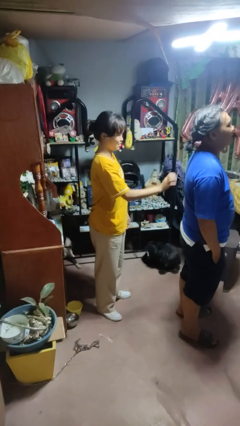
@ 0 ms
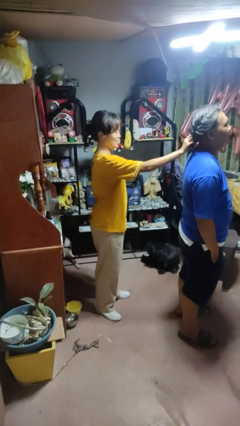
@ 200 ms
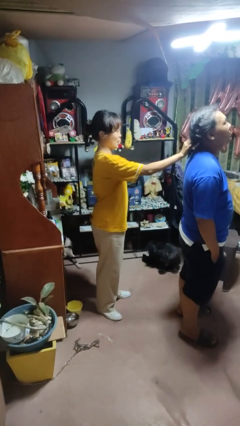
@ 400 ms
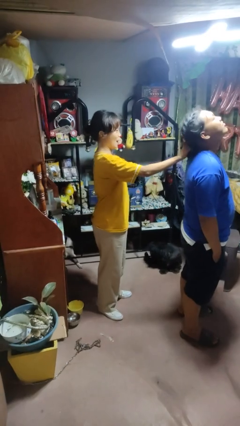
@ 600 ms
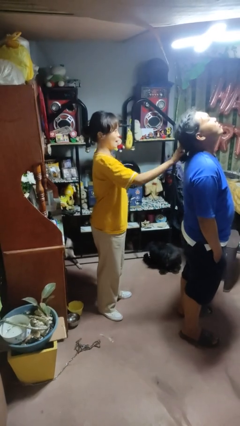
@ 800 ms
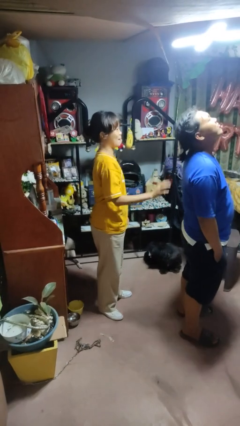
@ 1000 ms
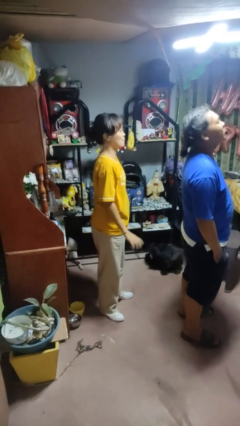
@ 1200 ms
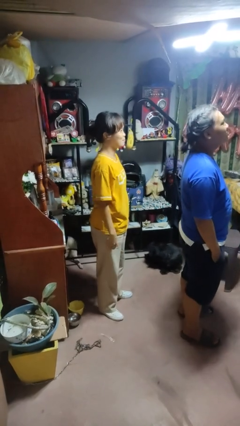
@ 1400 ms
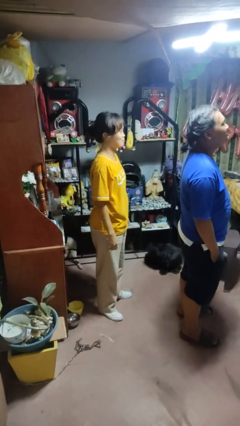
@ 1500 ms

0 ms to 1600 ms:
person grabs person by hair

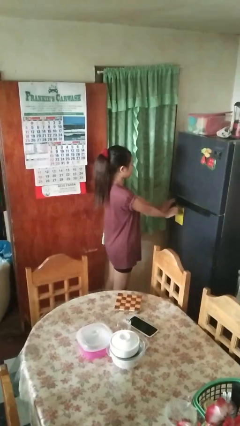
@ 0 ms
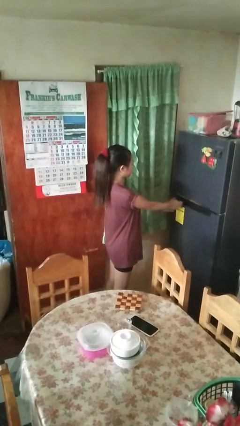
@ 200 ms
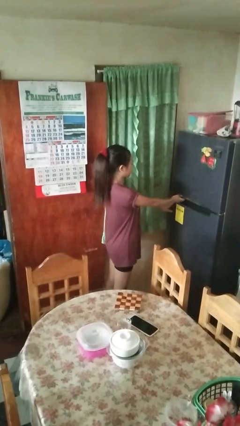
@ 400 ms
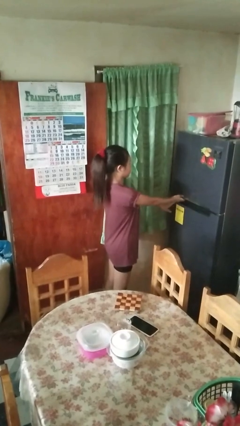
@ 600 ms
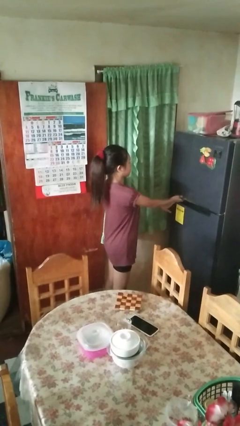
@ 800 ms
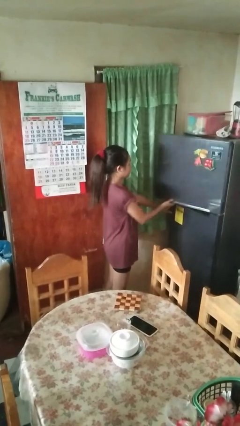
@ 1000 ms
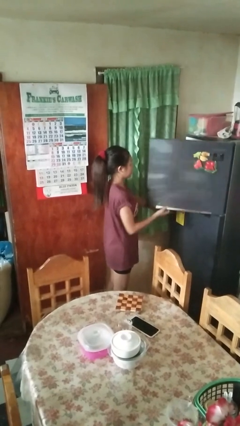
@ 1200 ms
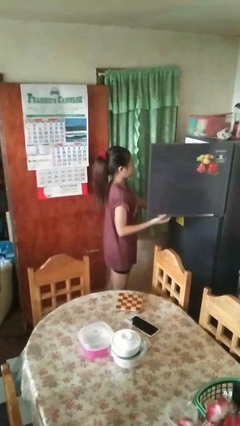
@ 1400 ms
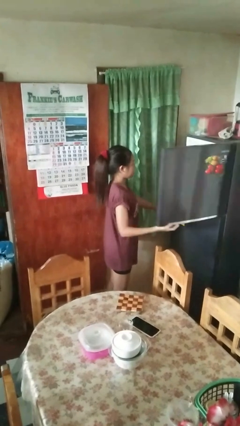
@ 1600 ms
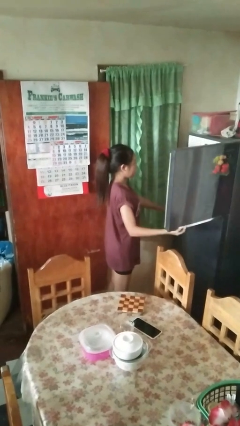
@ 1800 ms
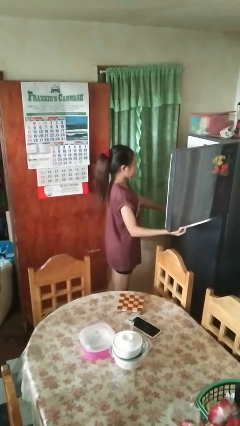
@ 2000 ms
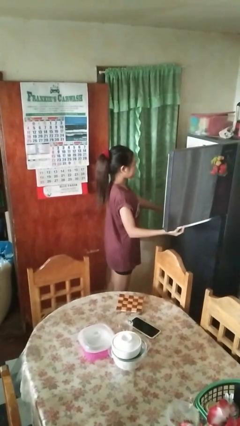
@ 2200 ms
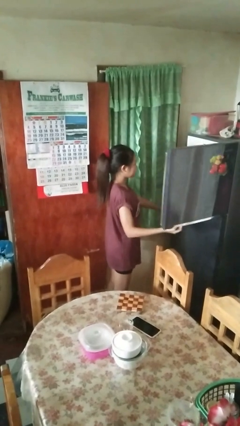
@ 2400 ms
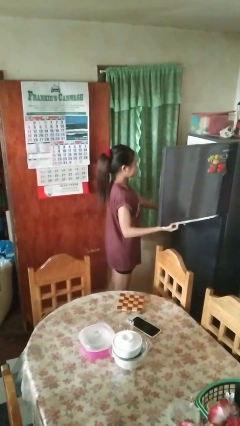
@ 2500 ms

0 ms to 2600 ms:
person opens refrigerator

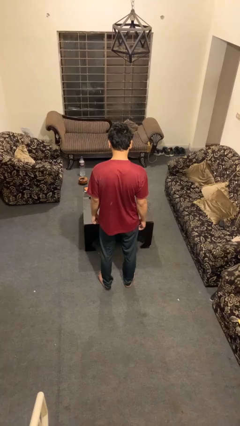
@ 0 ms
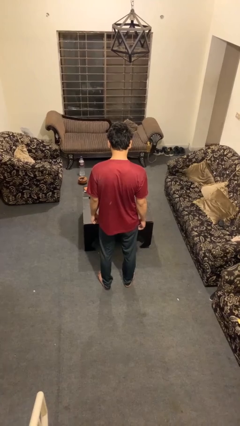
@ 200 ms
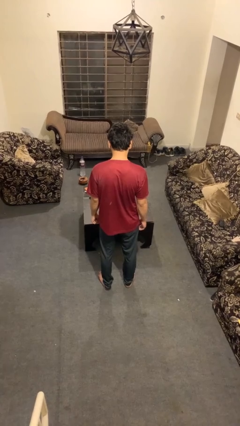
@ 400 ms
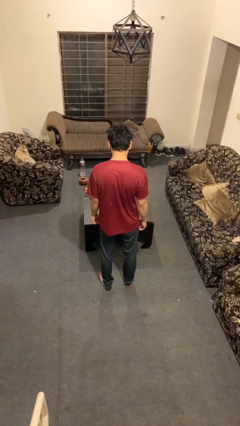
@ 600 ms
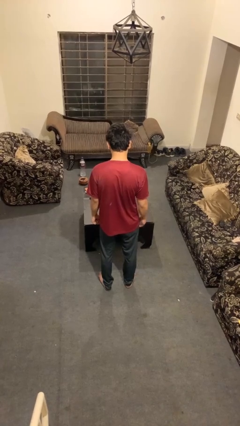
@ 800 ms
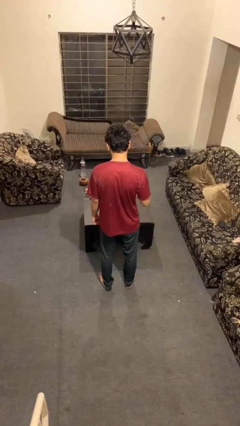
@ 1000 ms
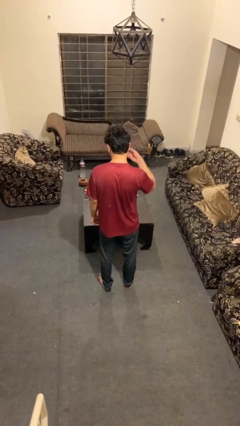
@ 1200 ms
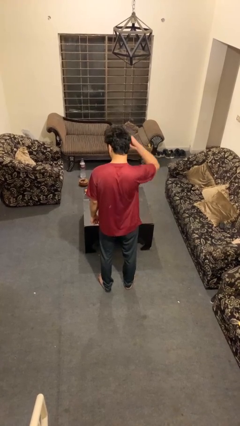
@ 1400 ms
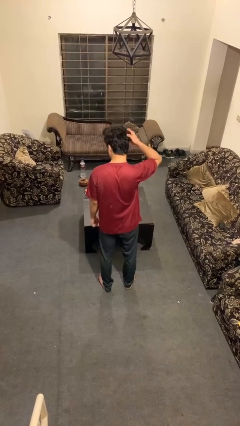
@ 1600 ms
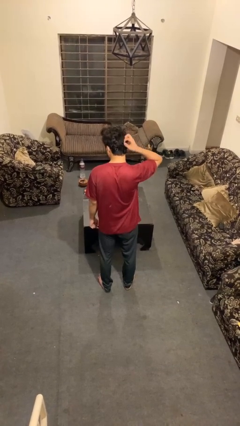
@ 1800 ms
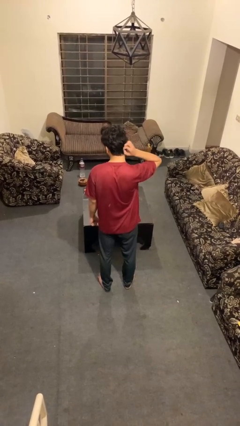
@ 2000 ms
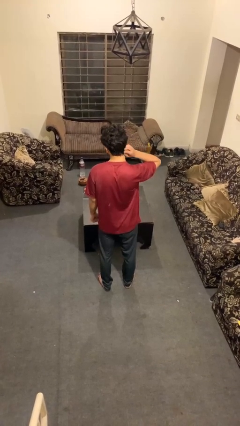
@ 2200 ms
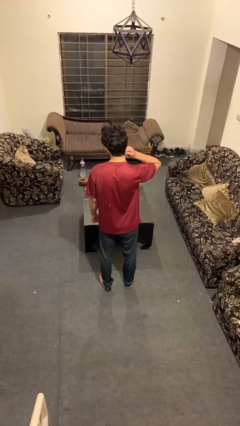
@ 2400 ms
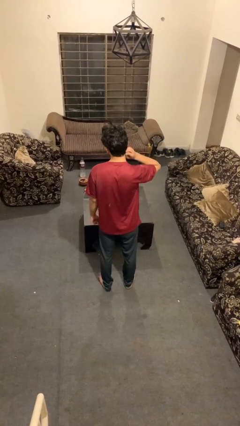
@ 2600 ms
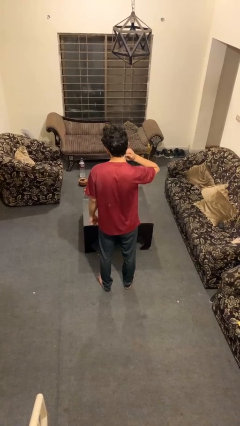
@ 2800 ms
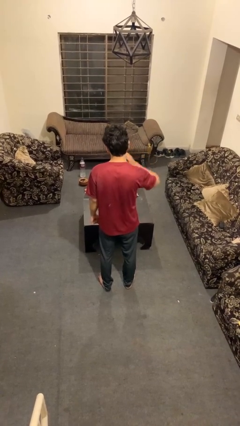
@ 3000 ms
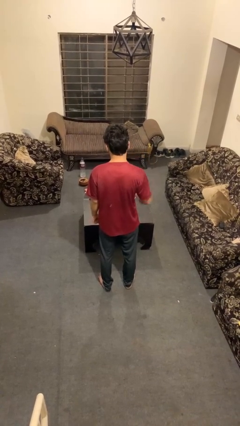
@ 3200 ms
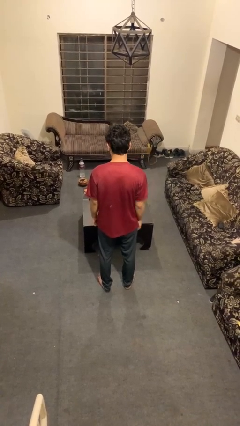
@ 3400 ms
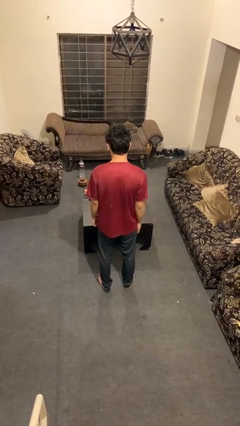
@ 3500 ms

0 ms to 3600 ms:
person strokes hair

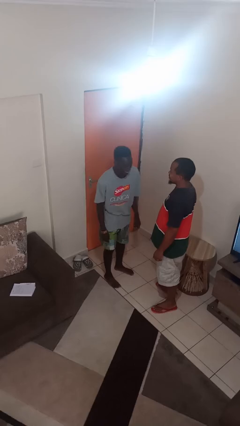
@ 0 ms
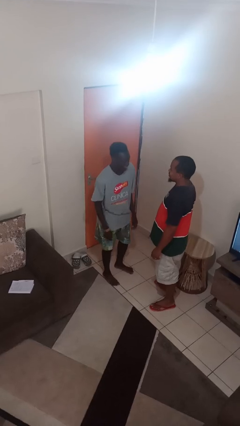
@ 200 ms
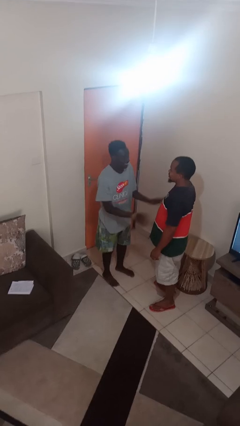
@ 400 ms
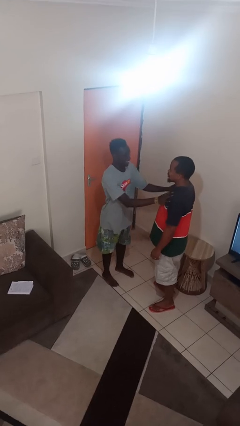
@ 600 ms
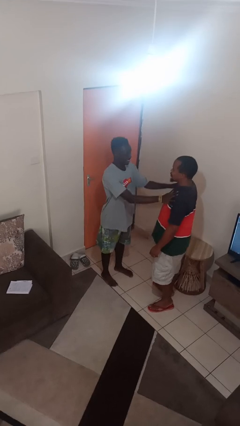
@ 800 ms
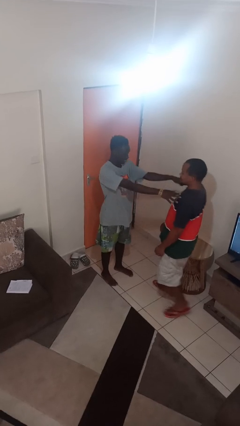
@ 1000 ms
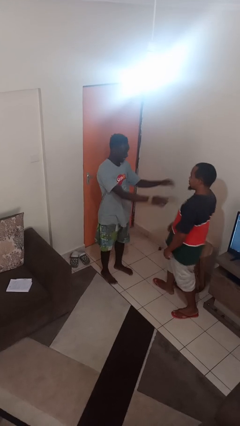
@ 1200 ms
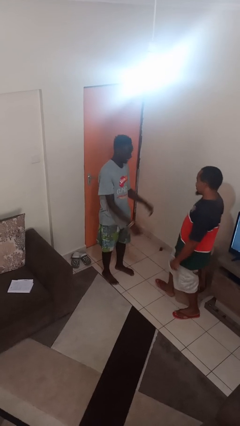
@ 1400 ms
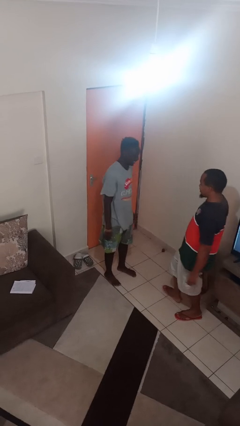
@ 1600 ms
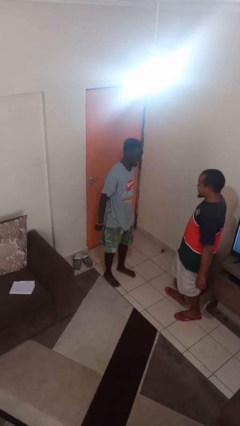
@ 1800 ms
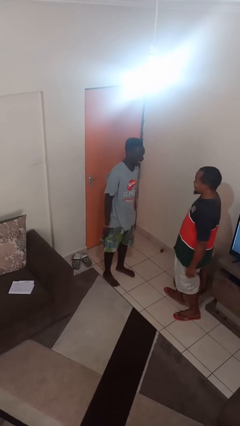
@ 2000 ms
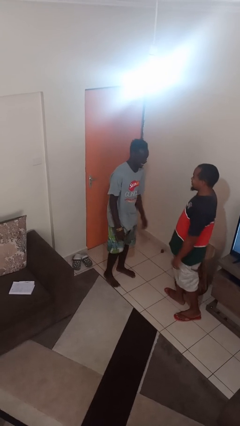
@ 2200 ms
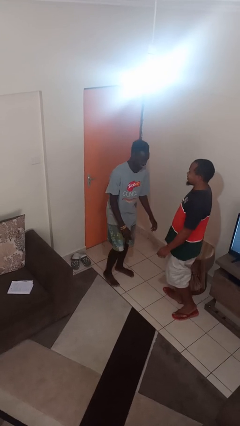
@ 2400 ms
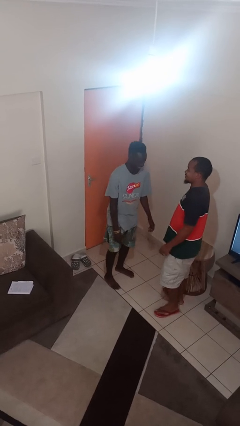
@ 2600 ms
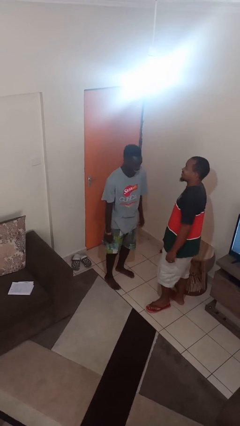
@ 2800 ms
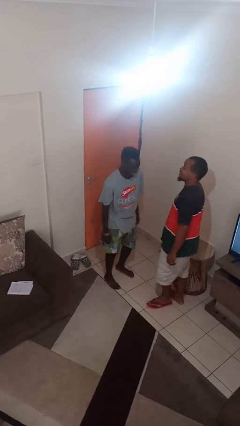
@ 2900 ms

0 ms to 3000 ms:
person shoves person

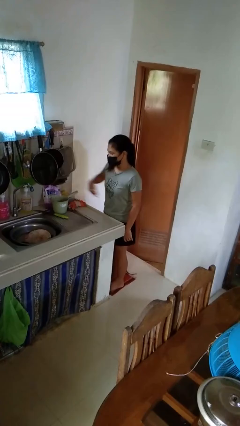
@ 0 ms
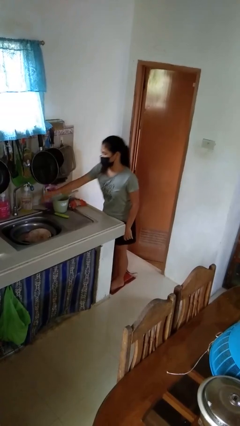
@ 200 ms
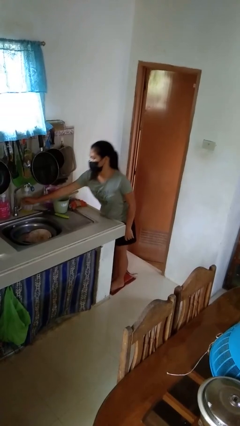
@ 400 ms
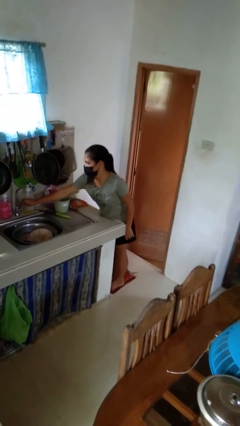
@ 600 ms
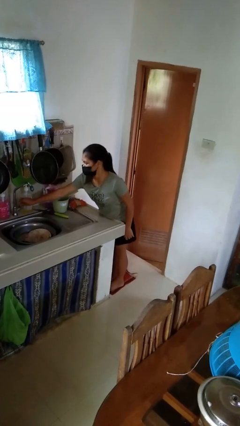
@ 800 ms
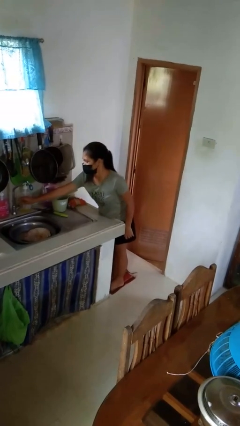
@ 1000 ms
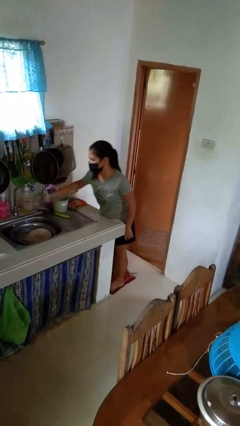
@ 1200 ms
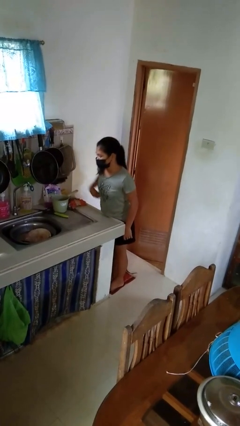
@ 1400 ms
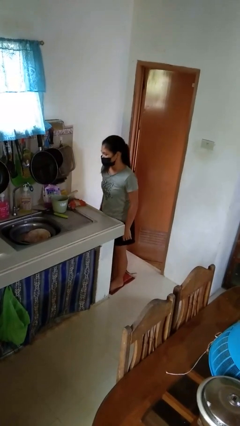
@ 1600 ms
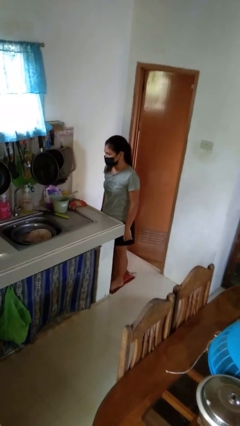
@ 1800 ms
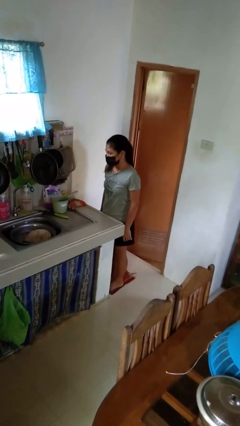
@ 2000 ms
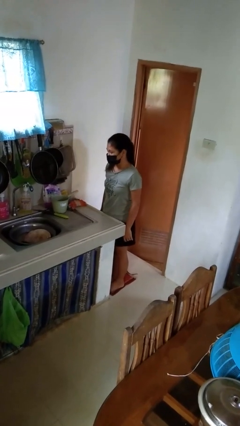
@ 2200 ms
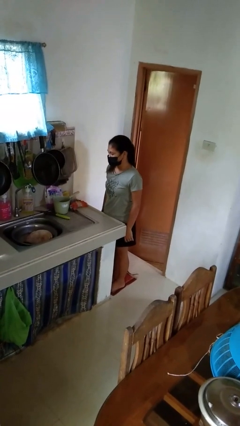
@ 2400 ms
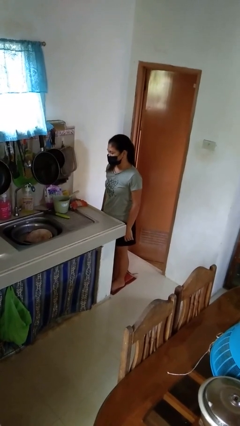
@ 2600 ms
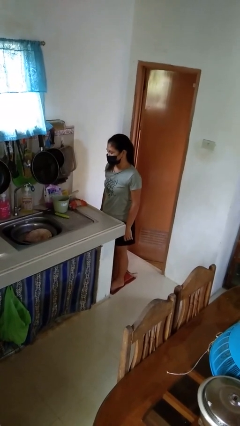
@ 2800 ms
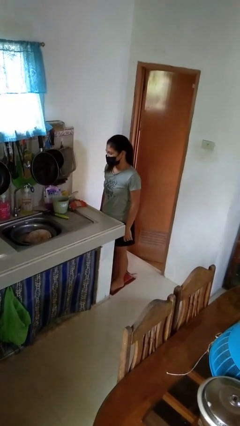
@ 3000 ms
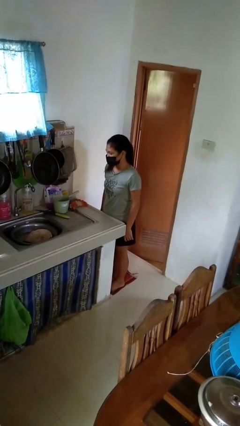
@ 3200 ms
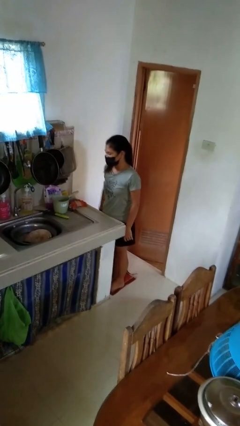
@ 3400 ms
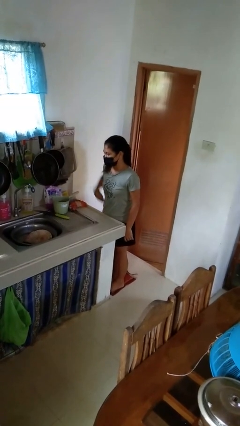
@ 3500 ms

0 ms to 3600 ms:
person turns on faucet

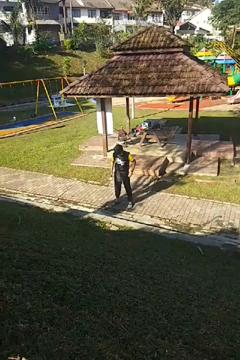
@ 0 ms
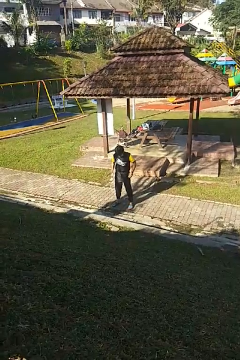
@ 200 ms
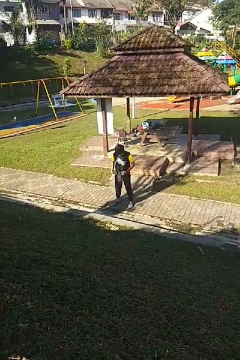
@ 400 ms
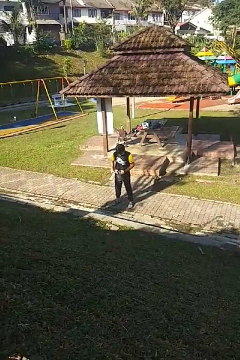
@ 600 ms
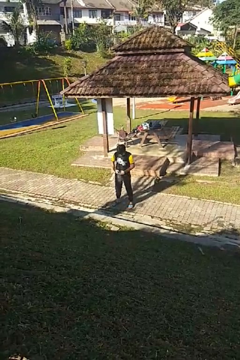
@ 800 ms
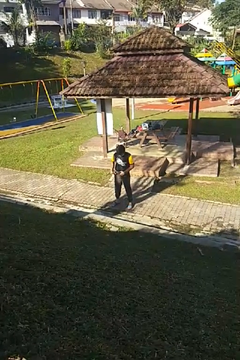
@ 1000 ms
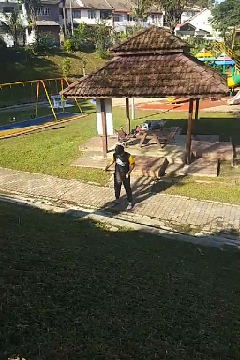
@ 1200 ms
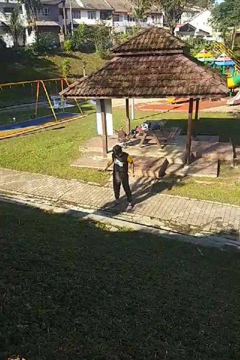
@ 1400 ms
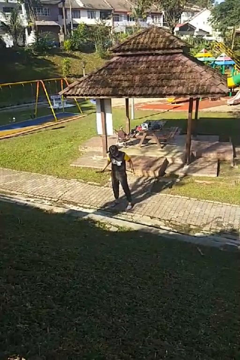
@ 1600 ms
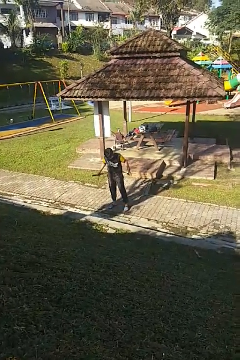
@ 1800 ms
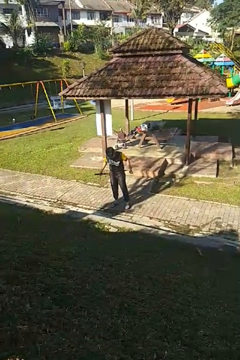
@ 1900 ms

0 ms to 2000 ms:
person takes off belt

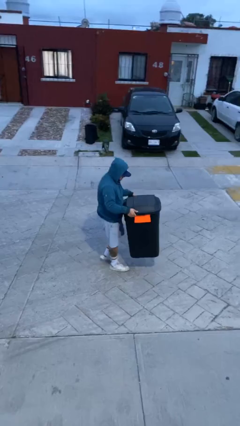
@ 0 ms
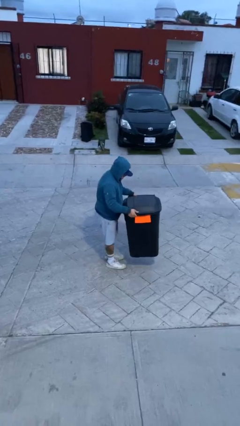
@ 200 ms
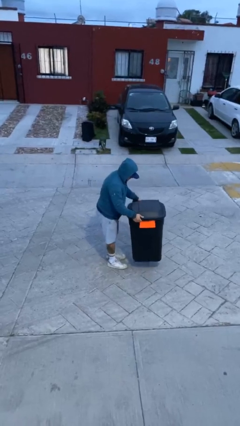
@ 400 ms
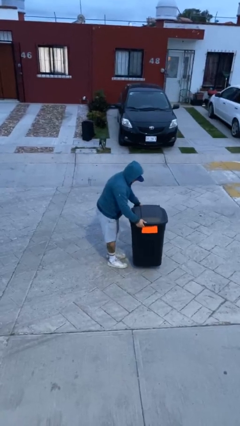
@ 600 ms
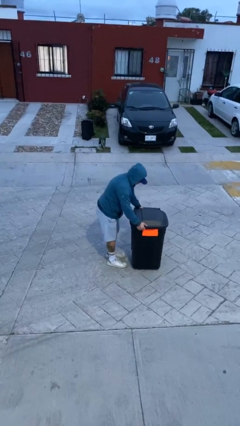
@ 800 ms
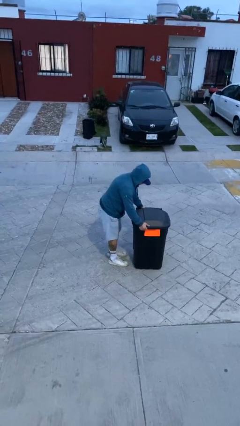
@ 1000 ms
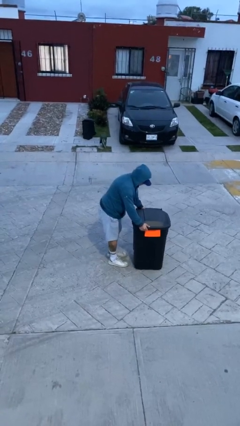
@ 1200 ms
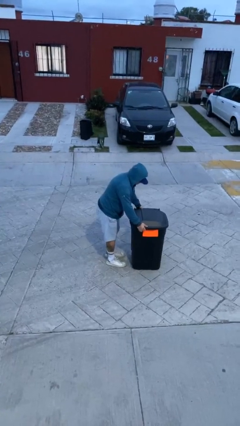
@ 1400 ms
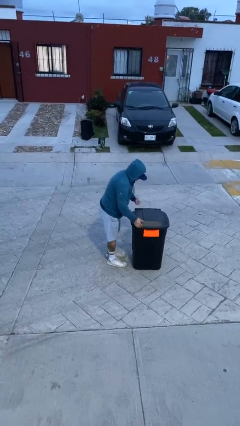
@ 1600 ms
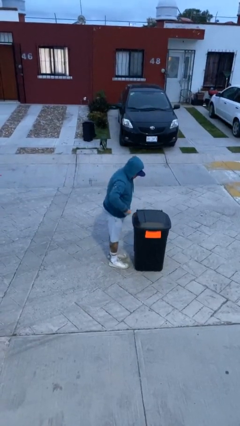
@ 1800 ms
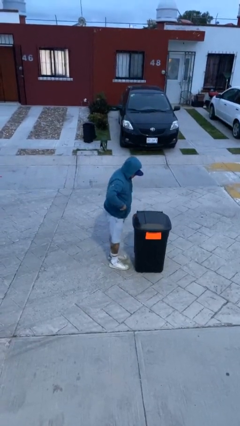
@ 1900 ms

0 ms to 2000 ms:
person puts down object on floor
